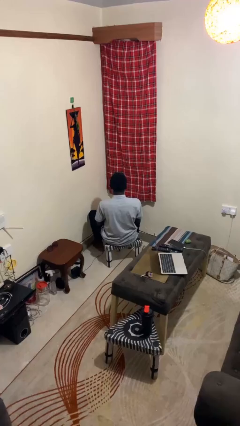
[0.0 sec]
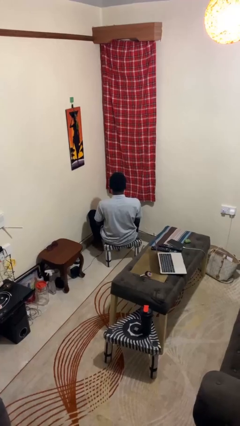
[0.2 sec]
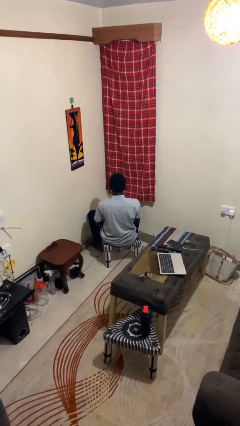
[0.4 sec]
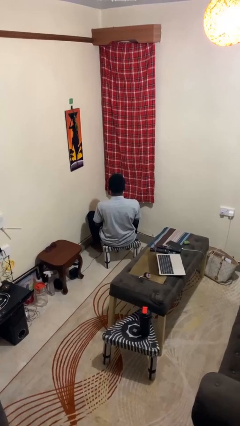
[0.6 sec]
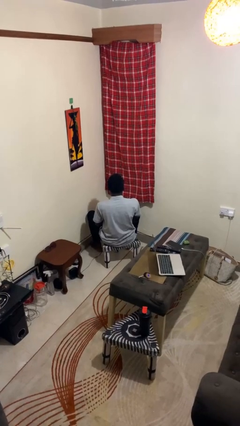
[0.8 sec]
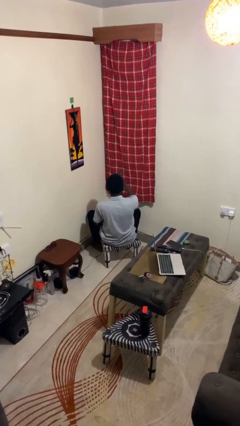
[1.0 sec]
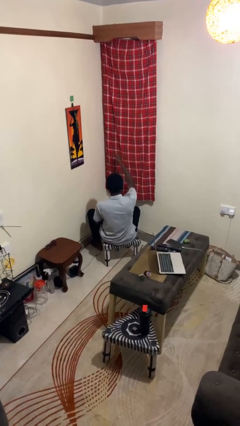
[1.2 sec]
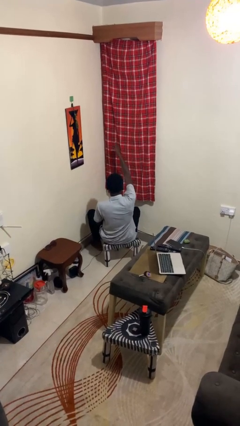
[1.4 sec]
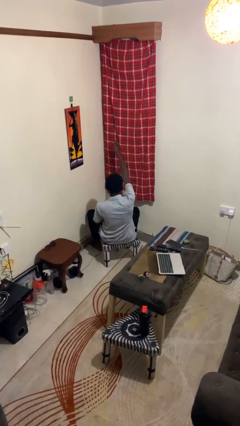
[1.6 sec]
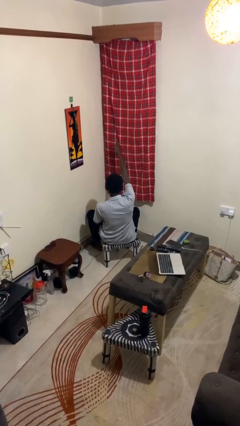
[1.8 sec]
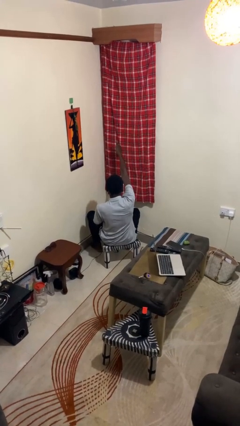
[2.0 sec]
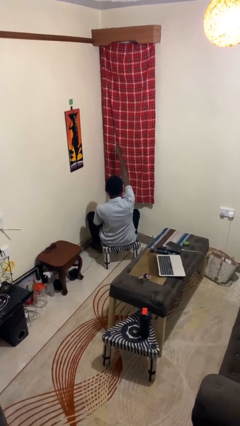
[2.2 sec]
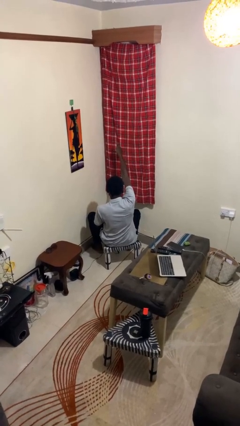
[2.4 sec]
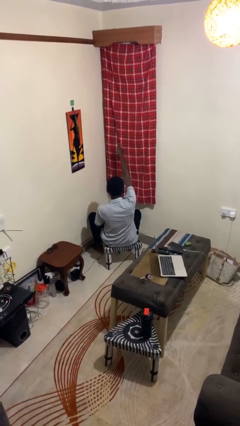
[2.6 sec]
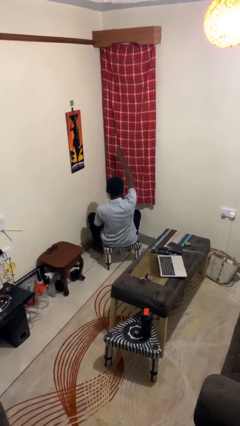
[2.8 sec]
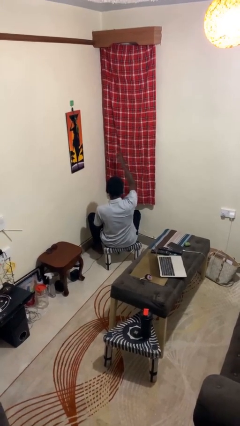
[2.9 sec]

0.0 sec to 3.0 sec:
person gestures thumbs up

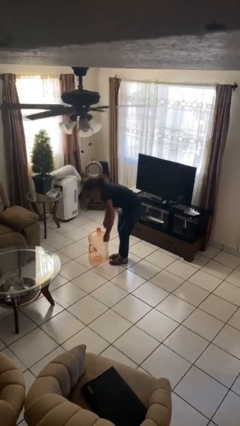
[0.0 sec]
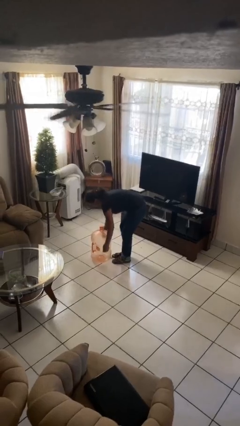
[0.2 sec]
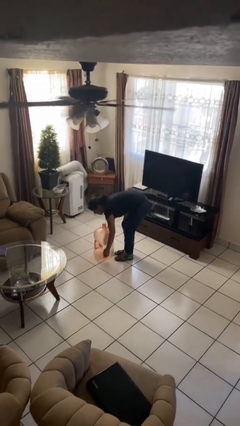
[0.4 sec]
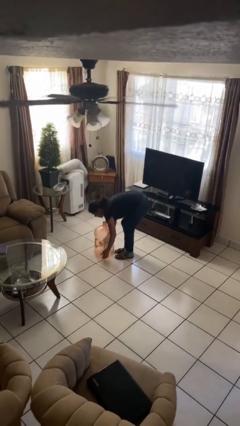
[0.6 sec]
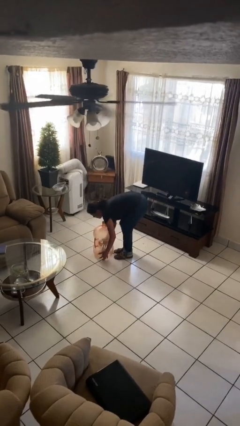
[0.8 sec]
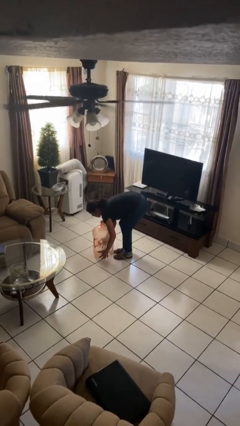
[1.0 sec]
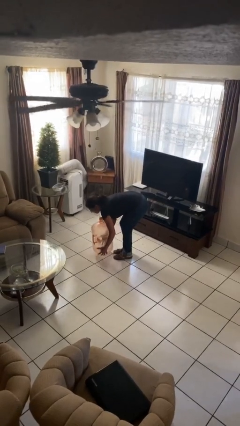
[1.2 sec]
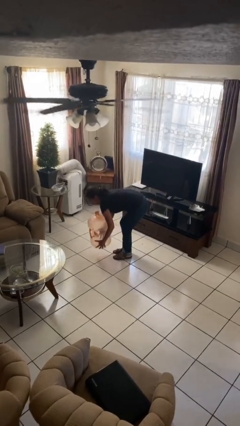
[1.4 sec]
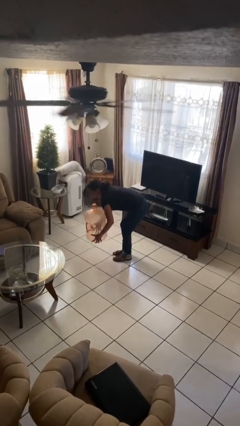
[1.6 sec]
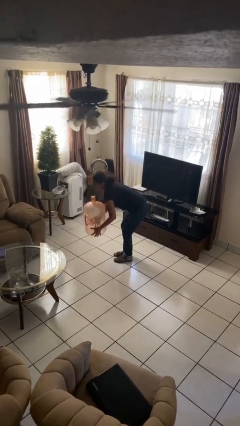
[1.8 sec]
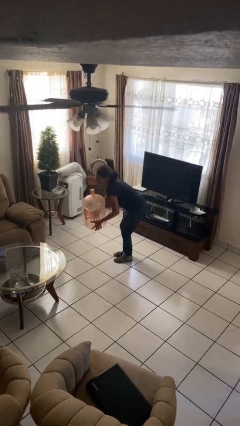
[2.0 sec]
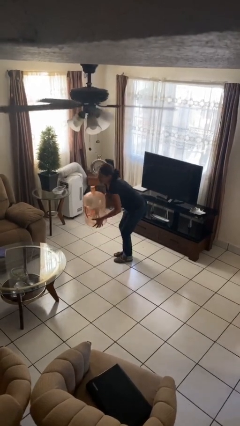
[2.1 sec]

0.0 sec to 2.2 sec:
person picks up object from floor

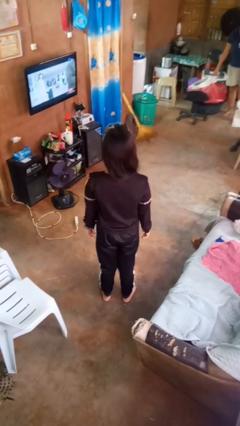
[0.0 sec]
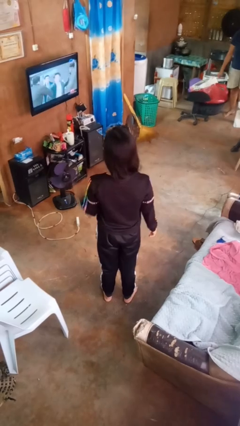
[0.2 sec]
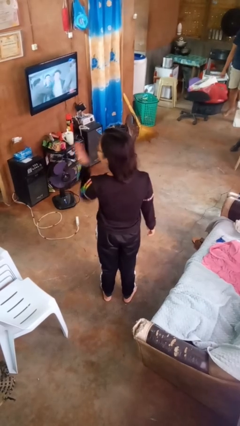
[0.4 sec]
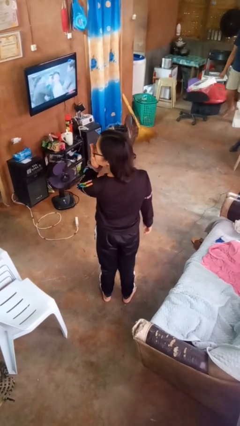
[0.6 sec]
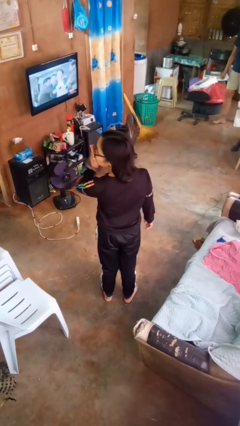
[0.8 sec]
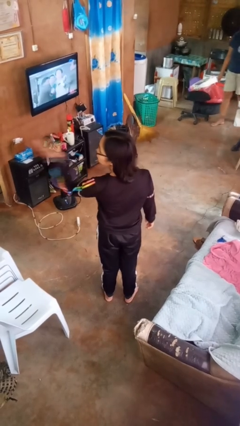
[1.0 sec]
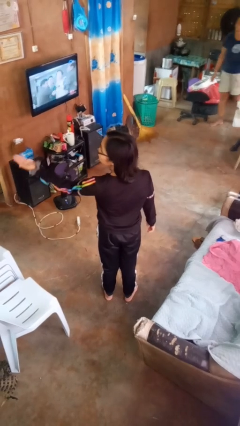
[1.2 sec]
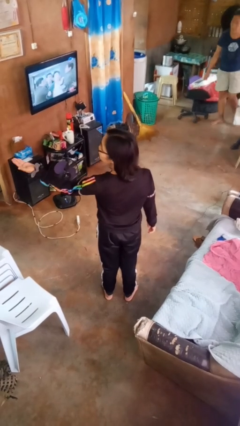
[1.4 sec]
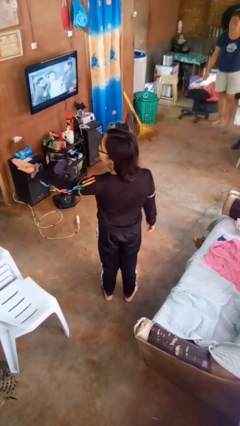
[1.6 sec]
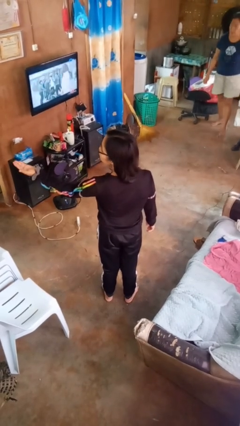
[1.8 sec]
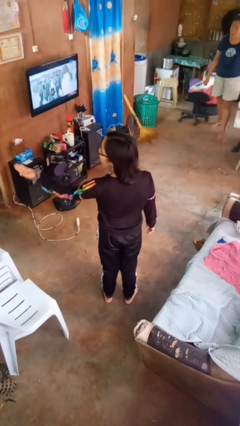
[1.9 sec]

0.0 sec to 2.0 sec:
person gestures blow kiss

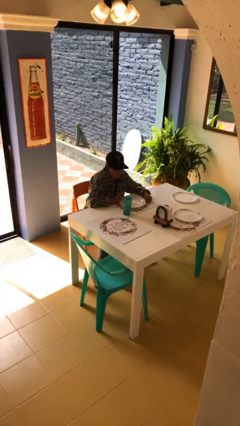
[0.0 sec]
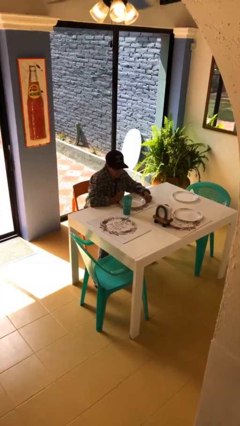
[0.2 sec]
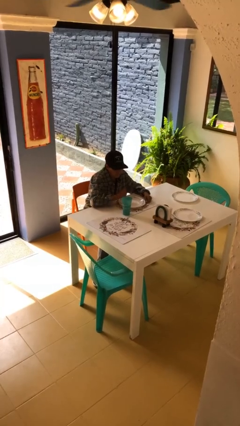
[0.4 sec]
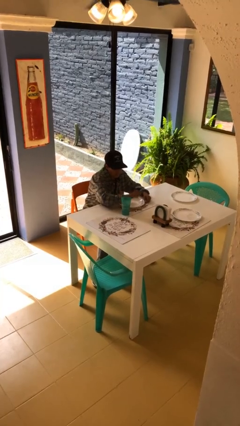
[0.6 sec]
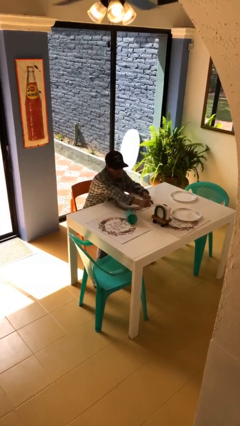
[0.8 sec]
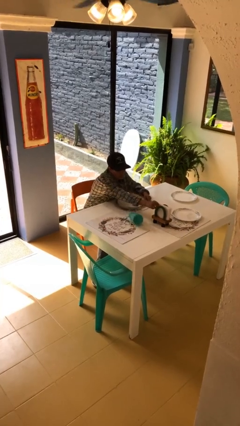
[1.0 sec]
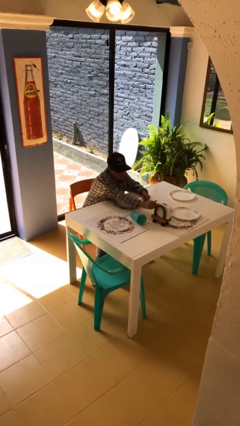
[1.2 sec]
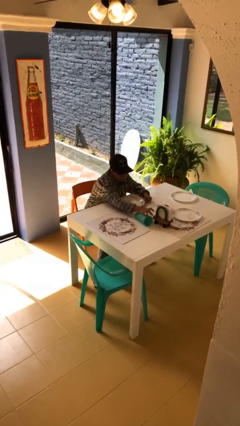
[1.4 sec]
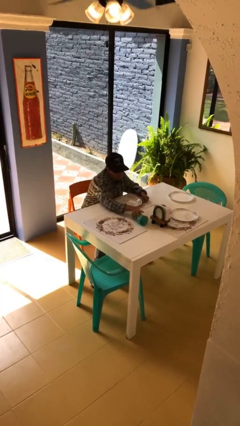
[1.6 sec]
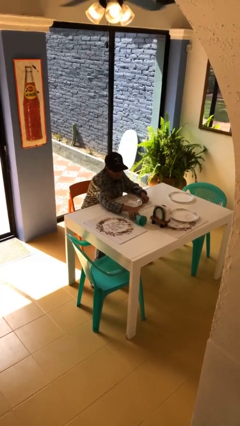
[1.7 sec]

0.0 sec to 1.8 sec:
person knocks over glass

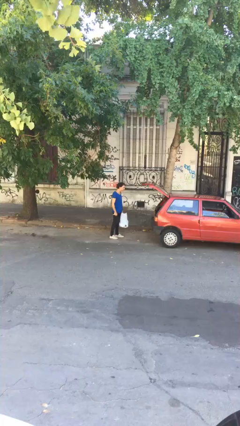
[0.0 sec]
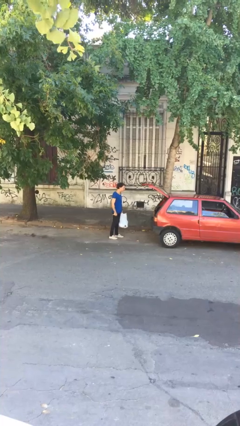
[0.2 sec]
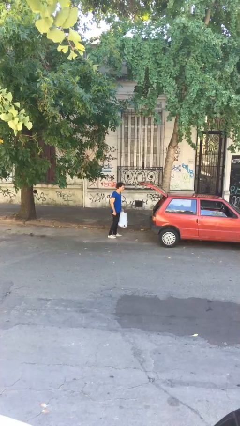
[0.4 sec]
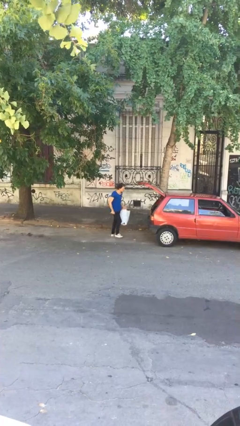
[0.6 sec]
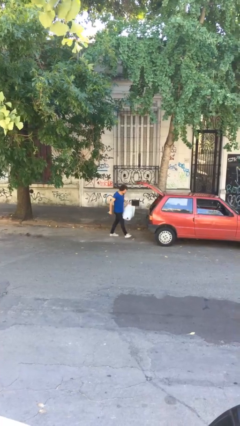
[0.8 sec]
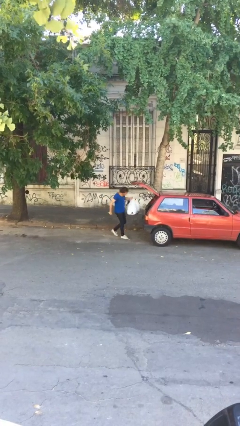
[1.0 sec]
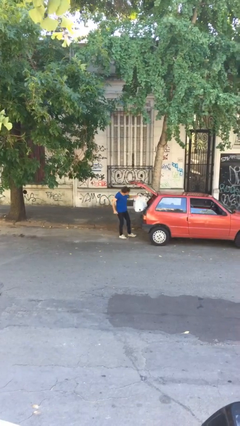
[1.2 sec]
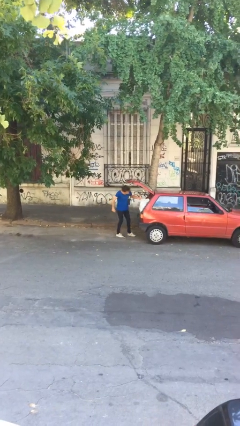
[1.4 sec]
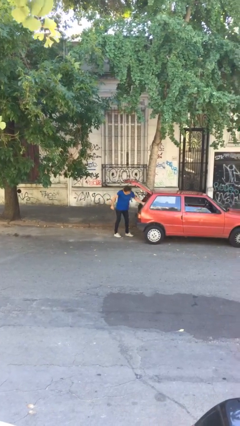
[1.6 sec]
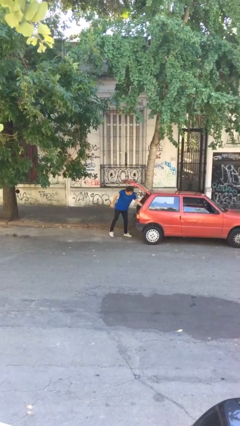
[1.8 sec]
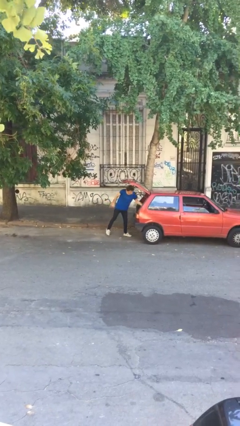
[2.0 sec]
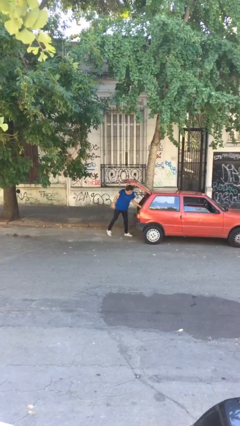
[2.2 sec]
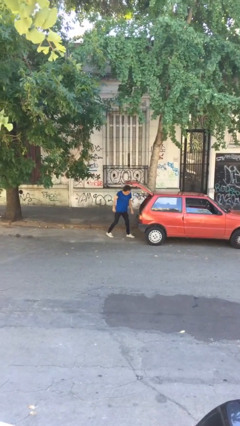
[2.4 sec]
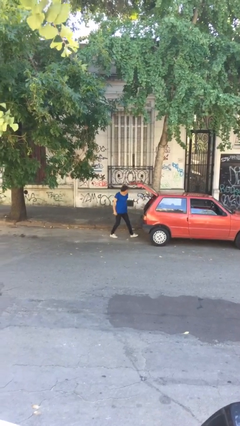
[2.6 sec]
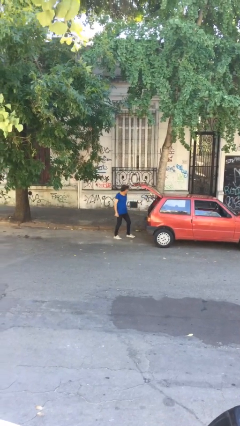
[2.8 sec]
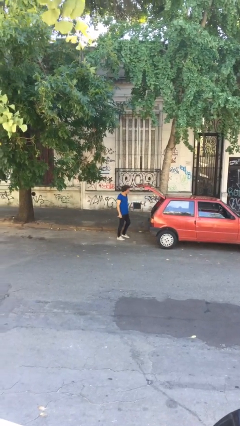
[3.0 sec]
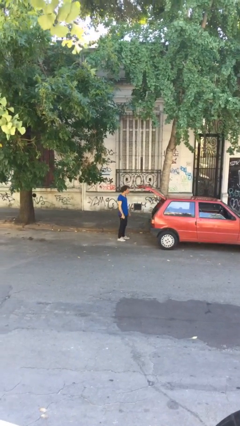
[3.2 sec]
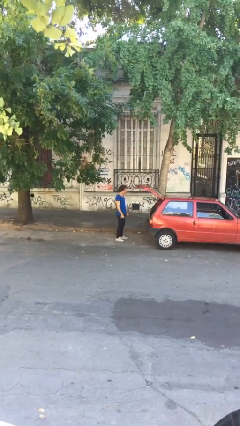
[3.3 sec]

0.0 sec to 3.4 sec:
person loads car

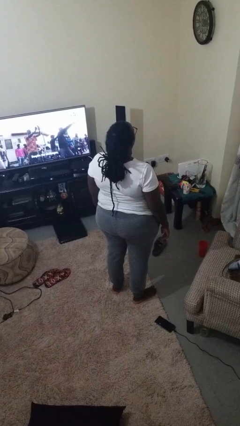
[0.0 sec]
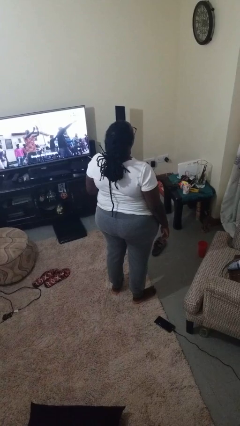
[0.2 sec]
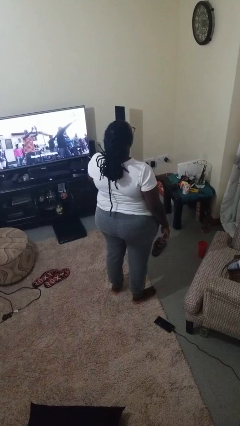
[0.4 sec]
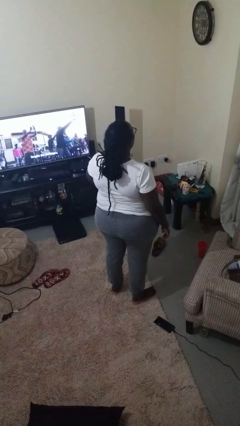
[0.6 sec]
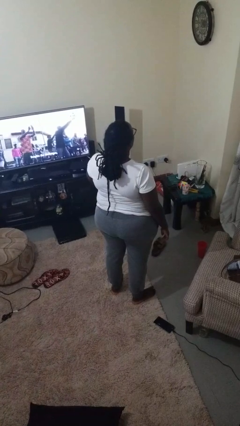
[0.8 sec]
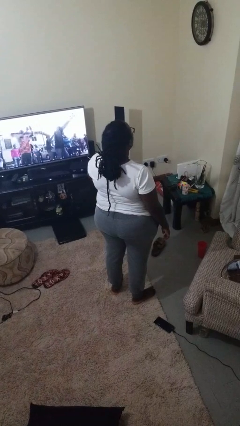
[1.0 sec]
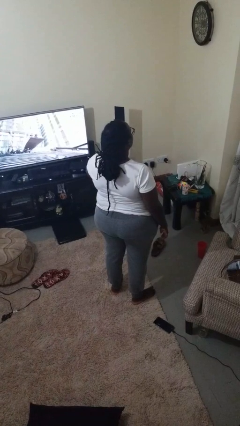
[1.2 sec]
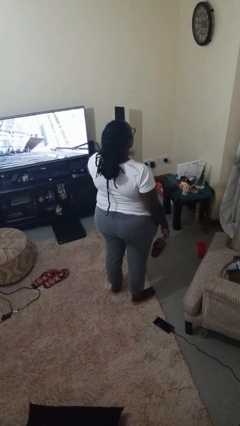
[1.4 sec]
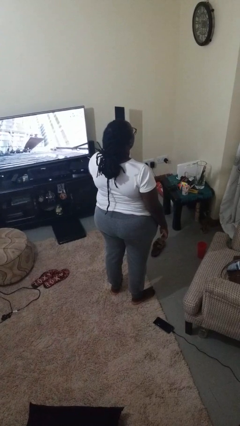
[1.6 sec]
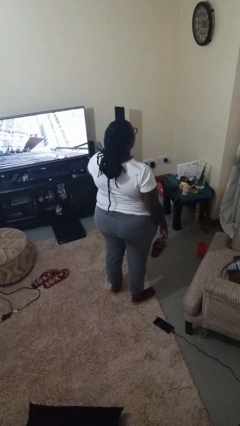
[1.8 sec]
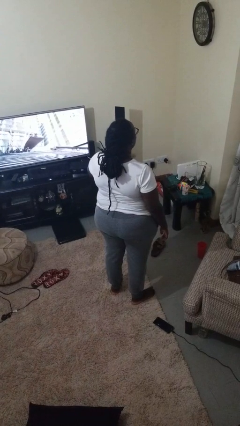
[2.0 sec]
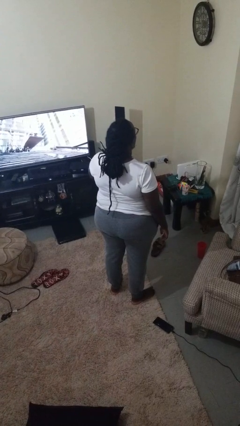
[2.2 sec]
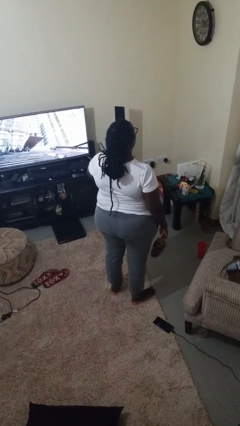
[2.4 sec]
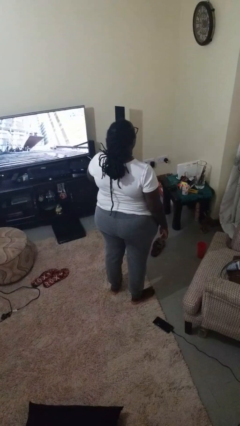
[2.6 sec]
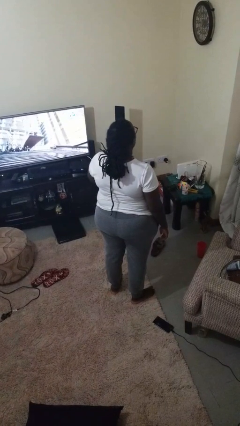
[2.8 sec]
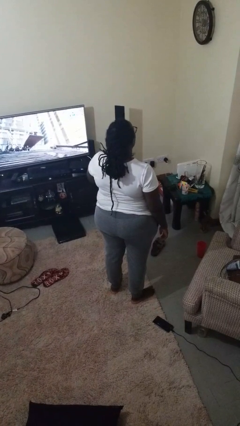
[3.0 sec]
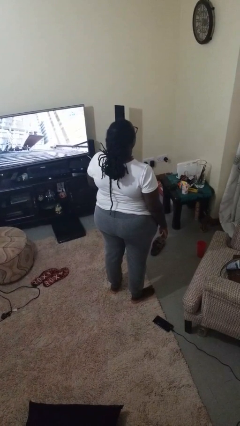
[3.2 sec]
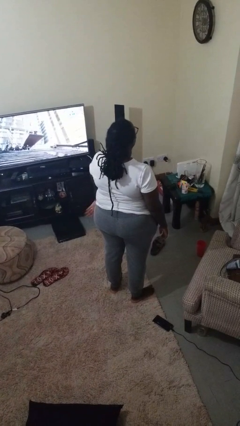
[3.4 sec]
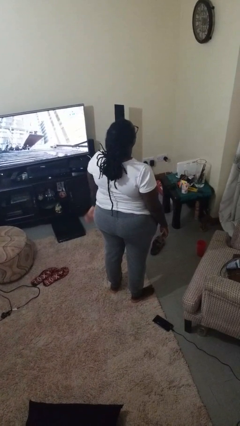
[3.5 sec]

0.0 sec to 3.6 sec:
person drums on chest

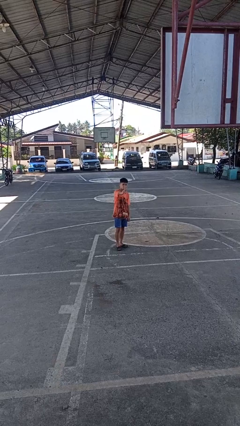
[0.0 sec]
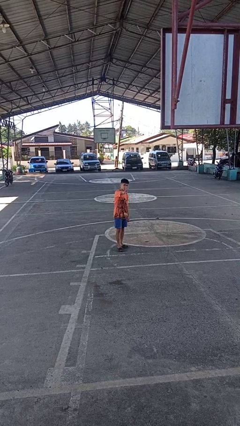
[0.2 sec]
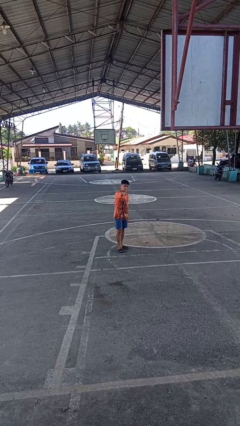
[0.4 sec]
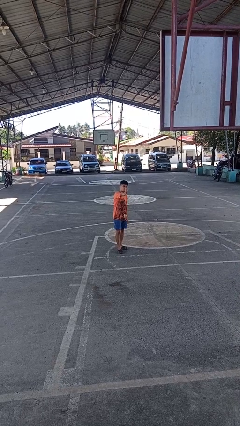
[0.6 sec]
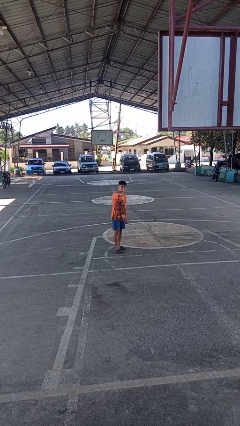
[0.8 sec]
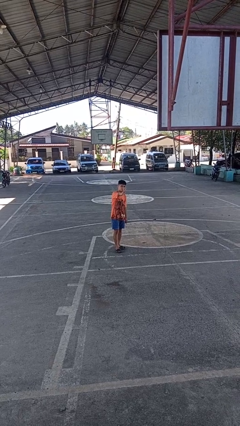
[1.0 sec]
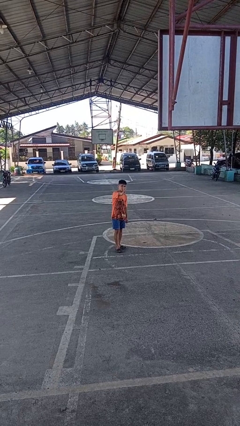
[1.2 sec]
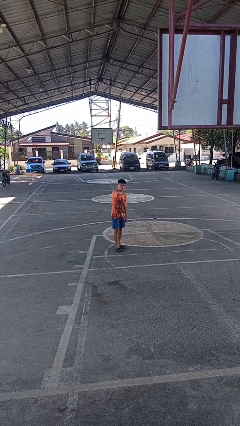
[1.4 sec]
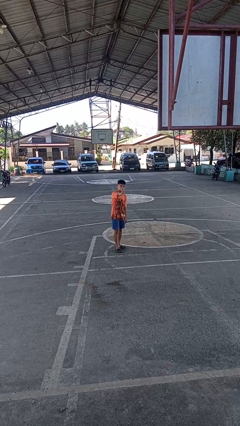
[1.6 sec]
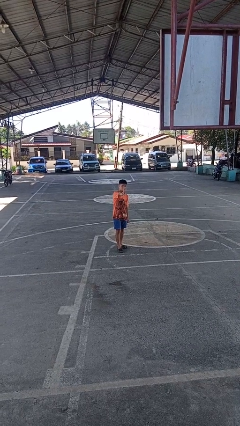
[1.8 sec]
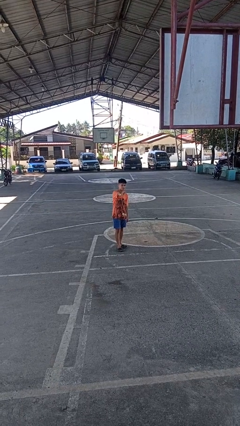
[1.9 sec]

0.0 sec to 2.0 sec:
person gestures peace
